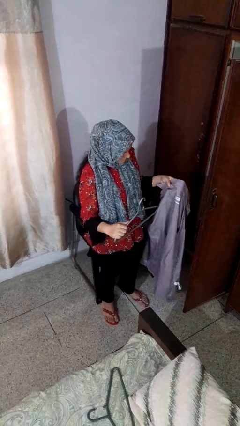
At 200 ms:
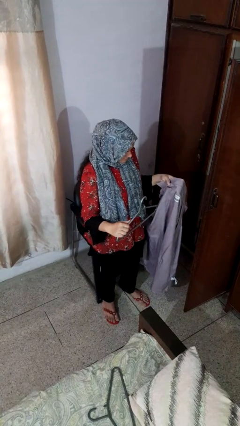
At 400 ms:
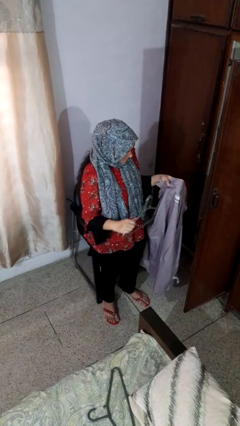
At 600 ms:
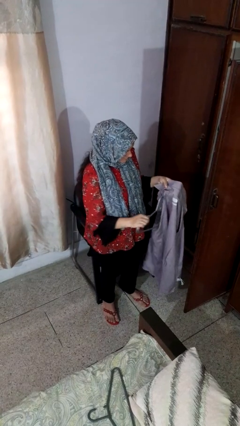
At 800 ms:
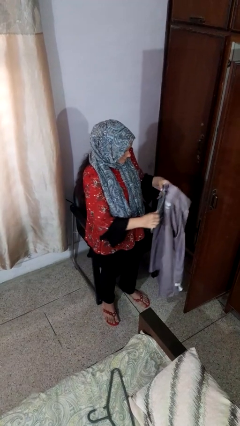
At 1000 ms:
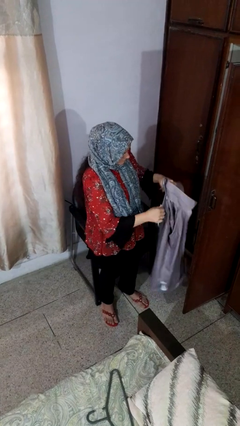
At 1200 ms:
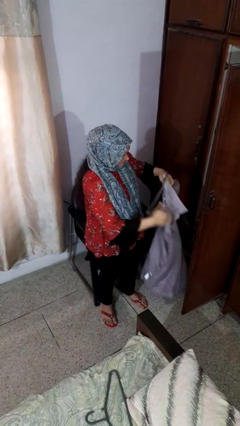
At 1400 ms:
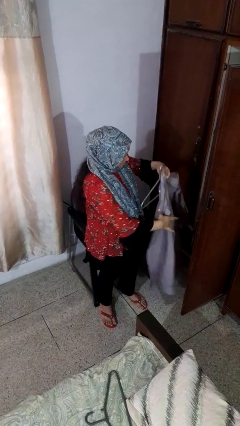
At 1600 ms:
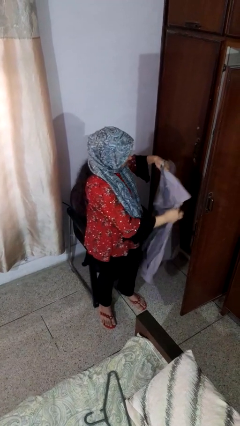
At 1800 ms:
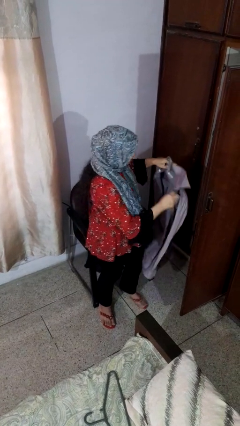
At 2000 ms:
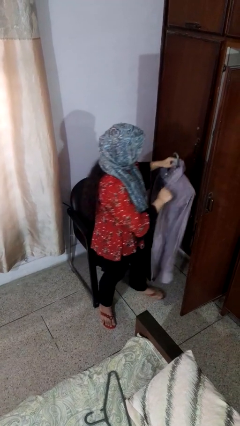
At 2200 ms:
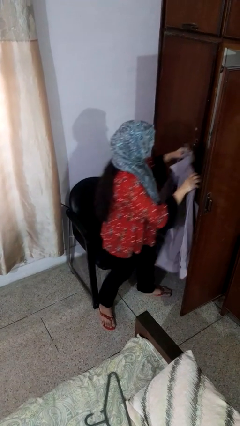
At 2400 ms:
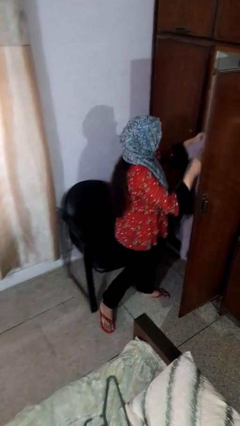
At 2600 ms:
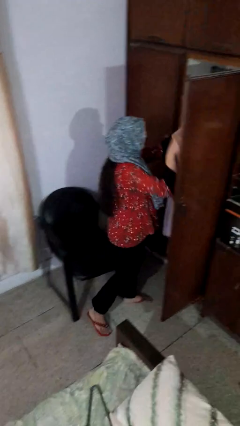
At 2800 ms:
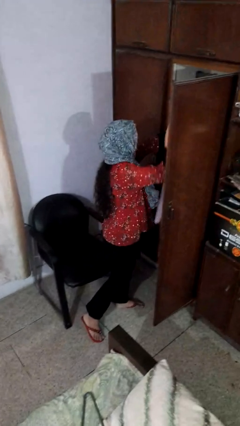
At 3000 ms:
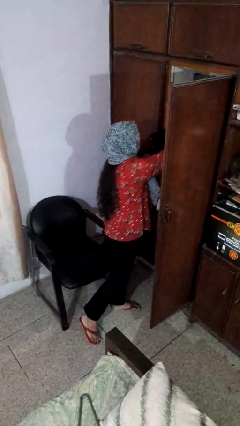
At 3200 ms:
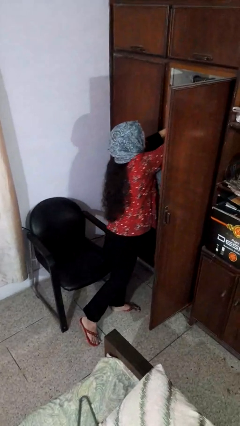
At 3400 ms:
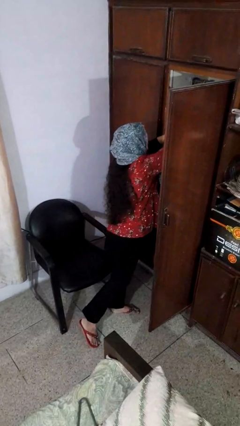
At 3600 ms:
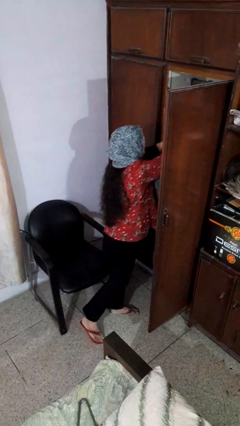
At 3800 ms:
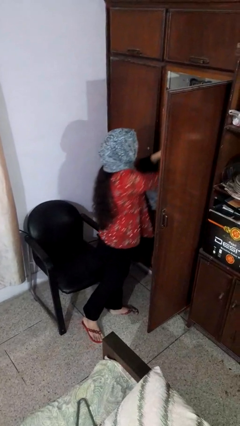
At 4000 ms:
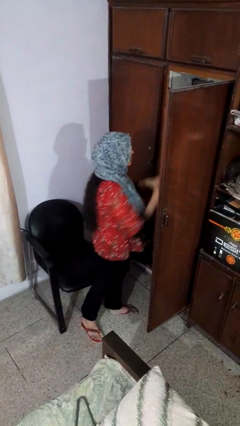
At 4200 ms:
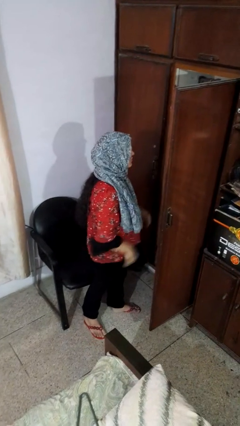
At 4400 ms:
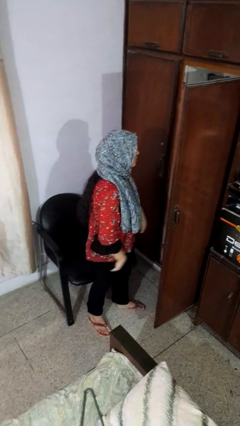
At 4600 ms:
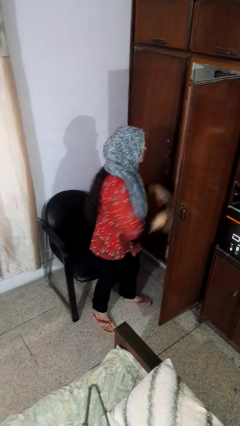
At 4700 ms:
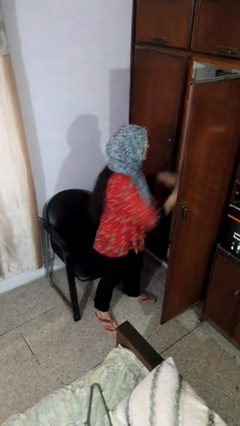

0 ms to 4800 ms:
person puts clothes into closet

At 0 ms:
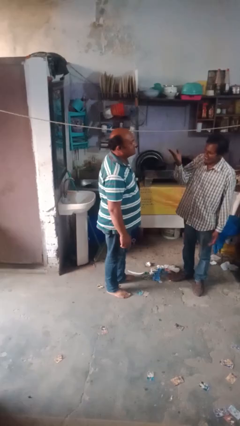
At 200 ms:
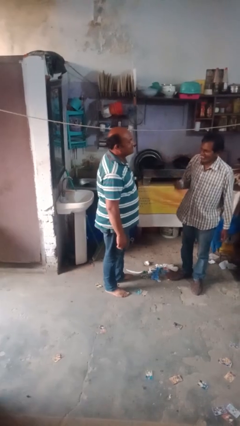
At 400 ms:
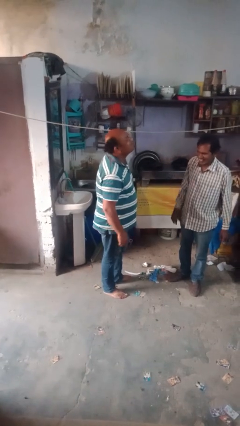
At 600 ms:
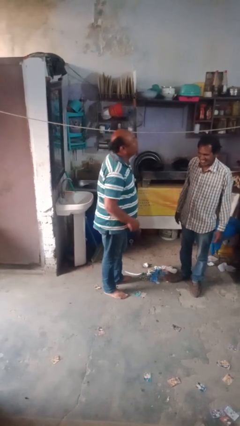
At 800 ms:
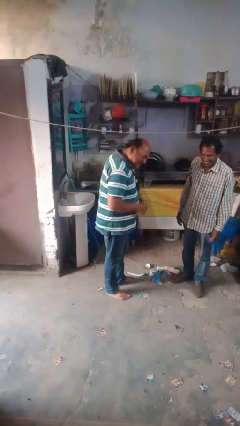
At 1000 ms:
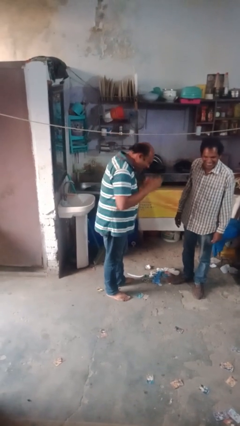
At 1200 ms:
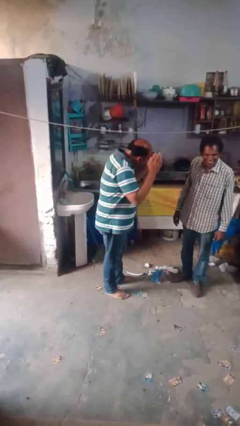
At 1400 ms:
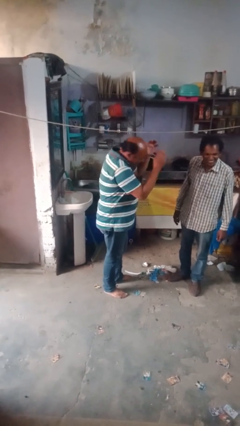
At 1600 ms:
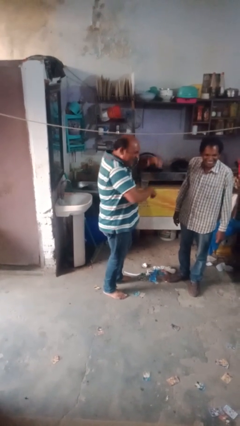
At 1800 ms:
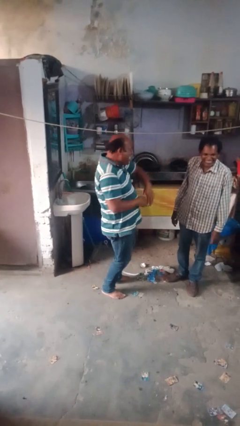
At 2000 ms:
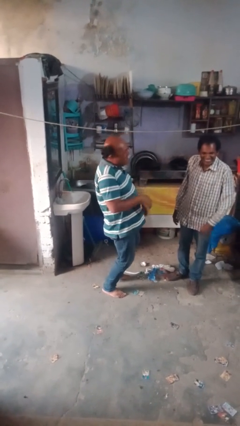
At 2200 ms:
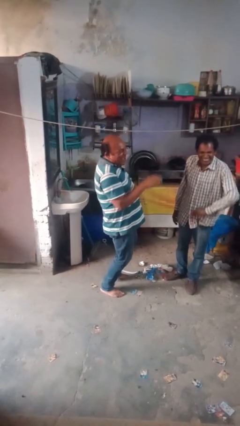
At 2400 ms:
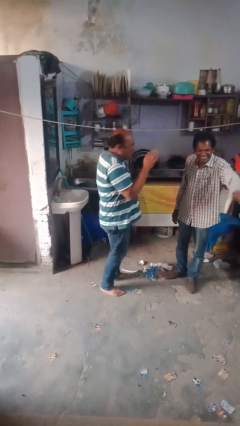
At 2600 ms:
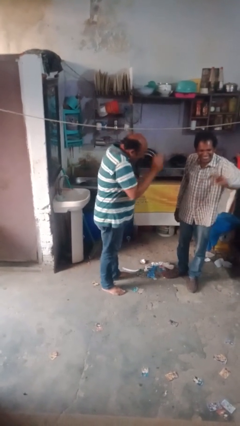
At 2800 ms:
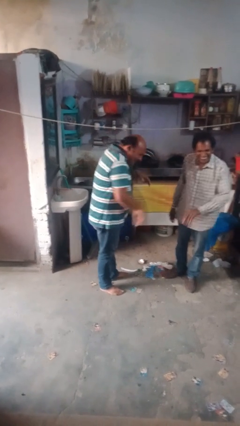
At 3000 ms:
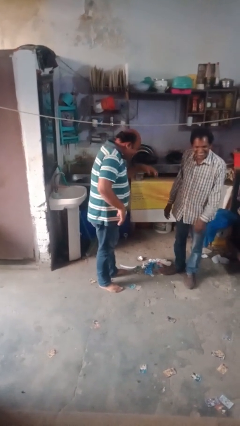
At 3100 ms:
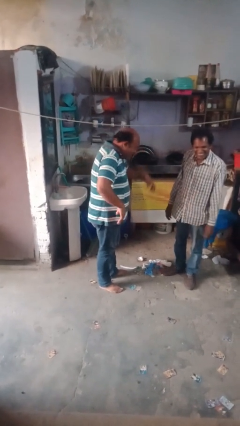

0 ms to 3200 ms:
person laughs with person

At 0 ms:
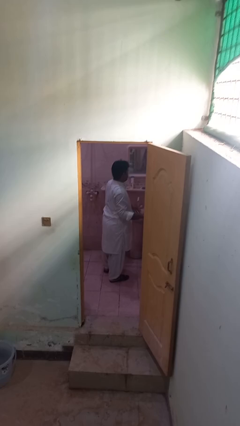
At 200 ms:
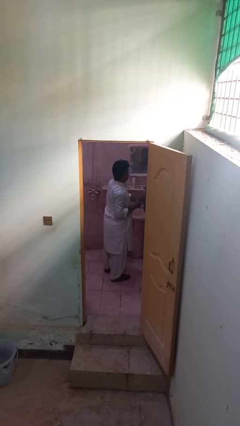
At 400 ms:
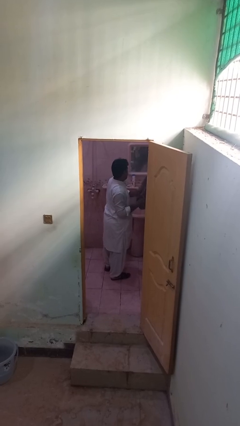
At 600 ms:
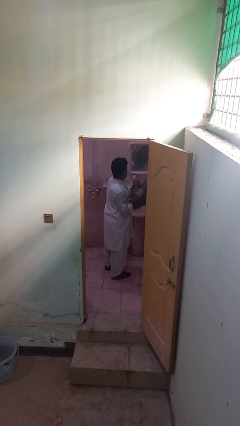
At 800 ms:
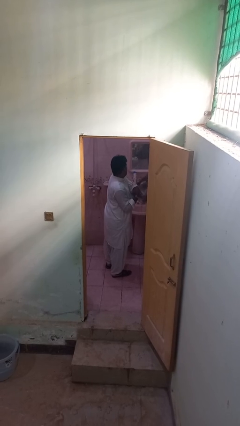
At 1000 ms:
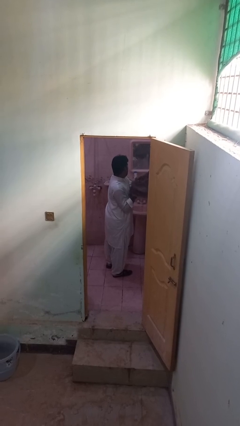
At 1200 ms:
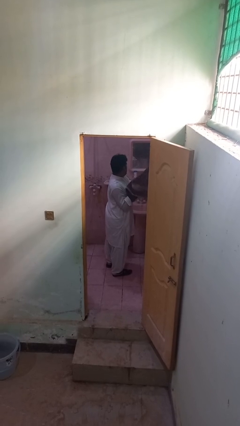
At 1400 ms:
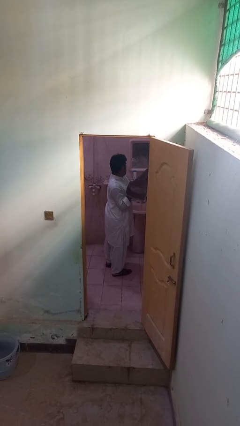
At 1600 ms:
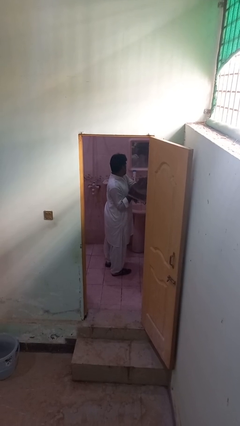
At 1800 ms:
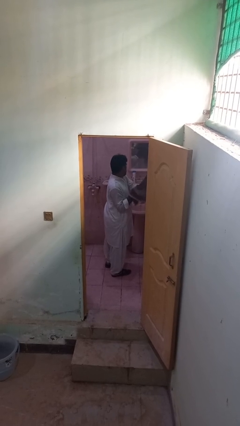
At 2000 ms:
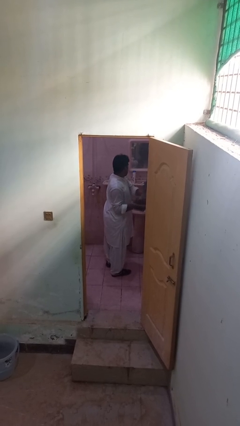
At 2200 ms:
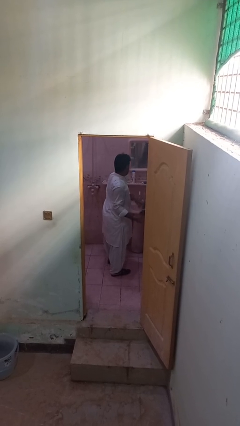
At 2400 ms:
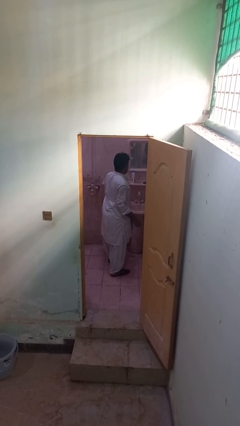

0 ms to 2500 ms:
person dries hands with towel

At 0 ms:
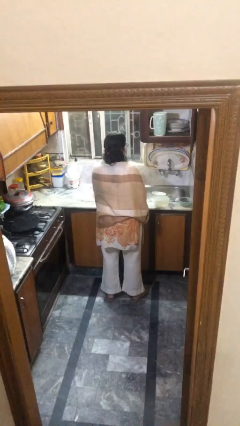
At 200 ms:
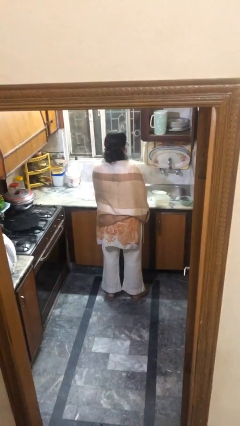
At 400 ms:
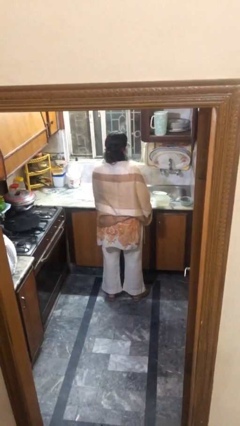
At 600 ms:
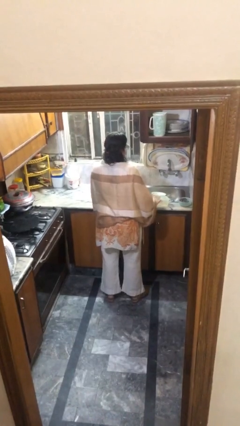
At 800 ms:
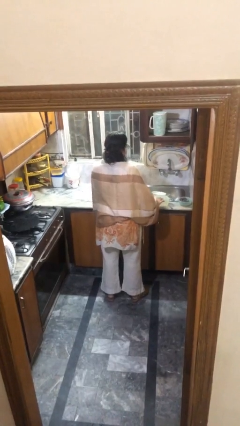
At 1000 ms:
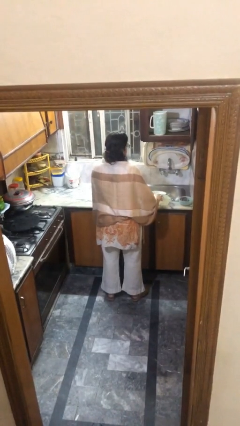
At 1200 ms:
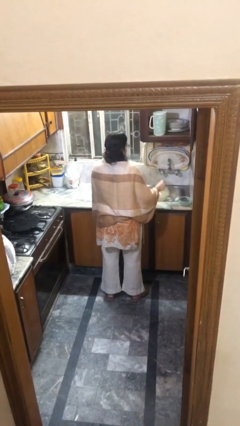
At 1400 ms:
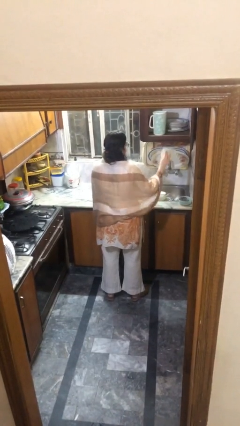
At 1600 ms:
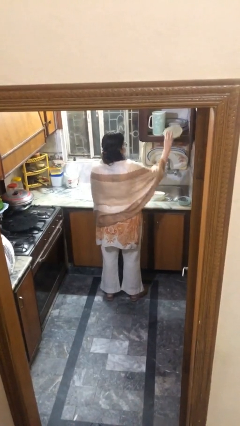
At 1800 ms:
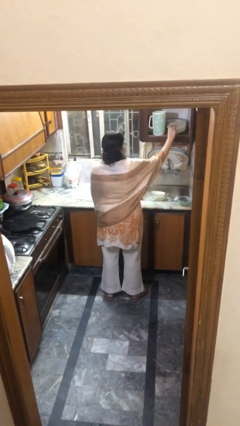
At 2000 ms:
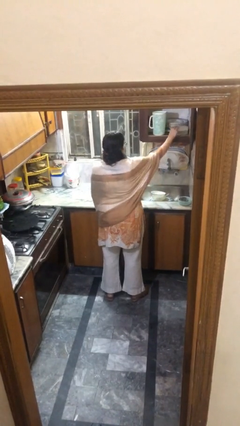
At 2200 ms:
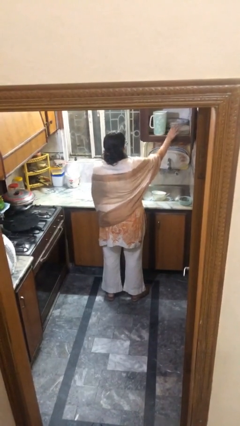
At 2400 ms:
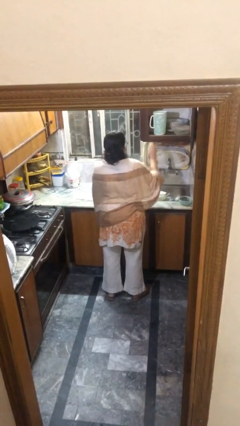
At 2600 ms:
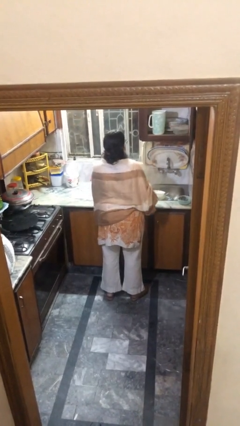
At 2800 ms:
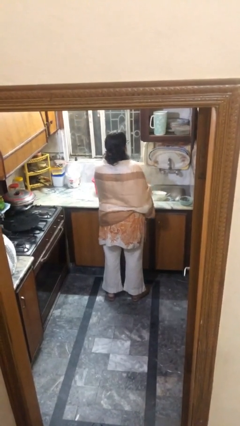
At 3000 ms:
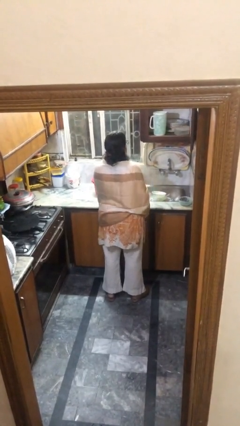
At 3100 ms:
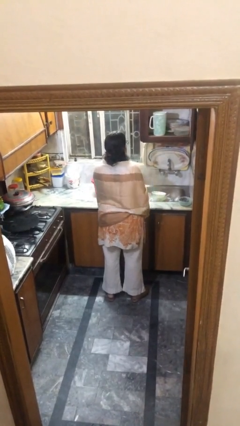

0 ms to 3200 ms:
person puts object into kitchen drawer

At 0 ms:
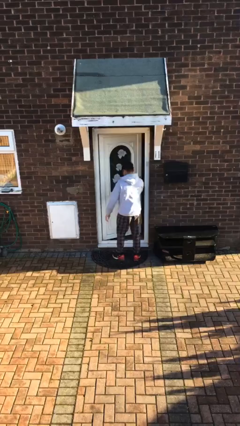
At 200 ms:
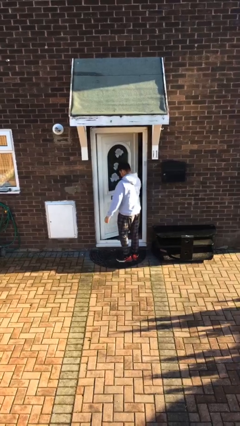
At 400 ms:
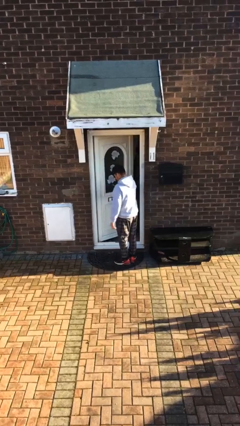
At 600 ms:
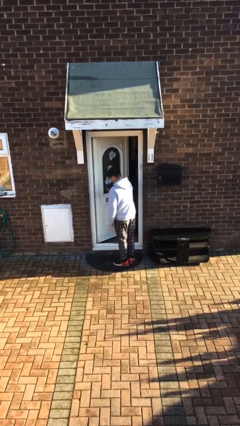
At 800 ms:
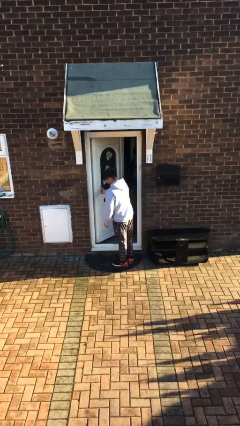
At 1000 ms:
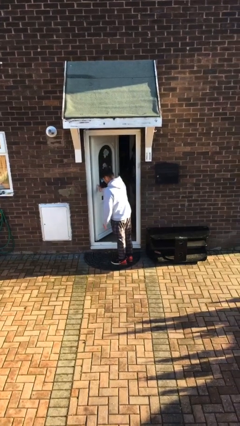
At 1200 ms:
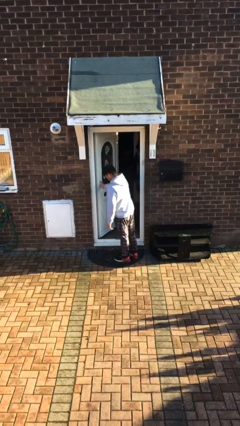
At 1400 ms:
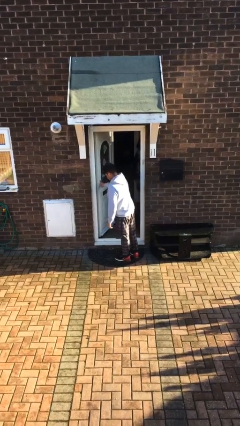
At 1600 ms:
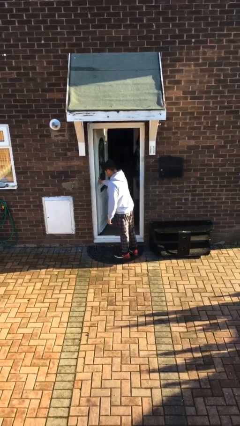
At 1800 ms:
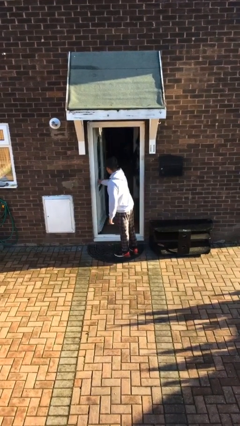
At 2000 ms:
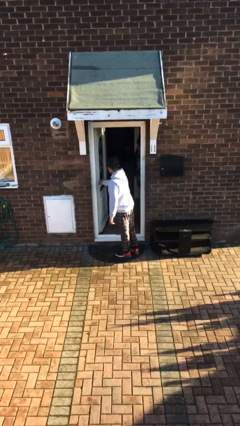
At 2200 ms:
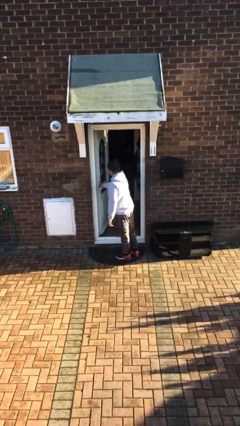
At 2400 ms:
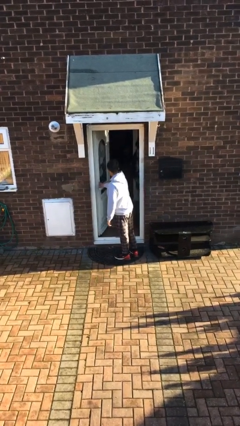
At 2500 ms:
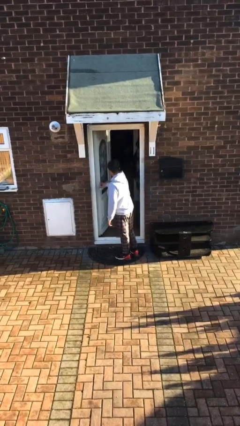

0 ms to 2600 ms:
person opens facility door

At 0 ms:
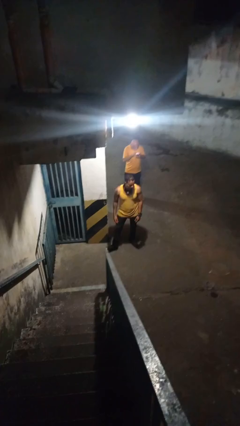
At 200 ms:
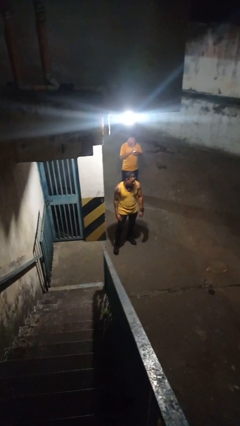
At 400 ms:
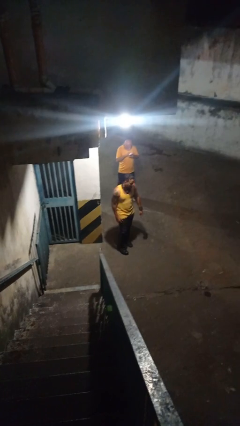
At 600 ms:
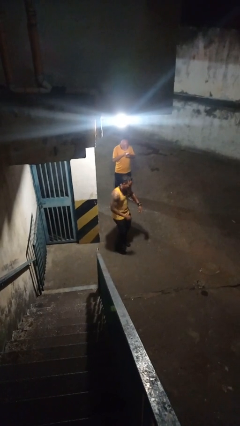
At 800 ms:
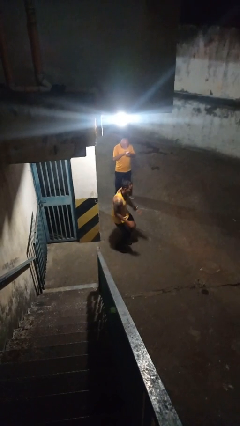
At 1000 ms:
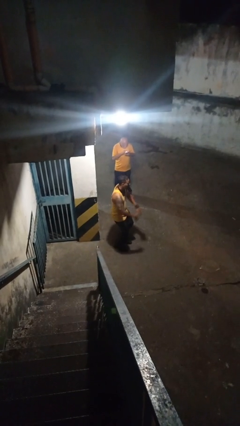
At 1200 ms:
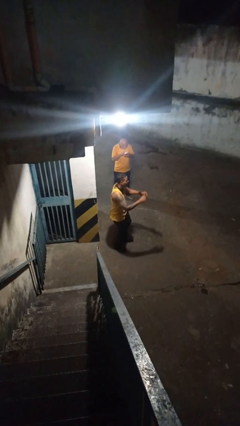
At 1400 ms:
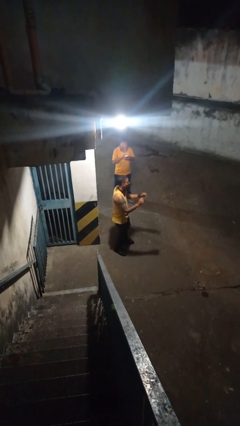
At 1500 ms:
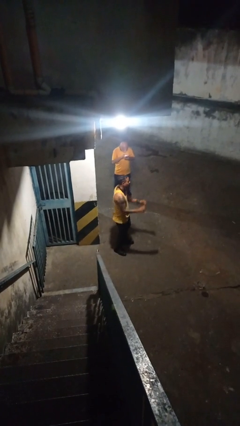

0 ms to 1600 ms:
person slaps hands on thighs
